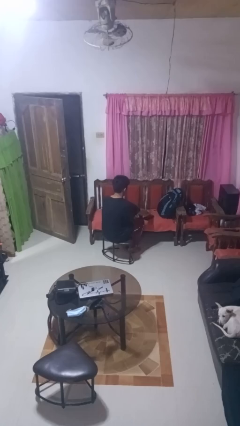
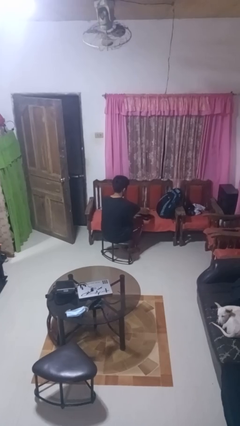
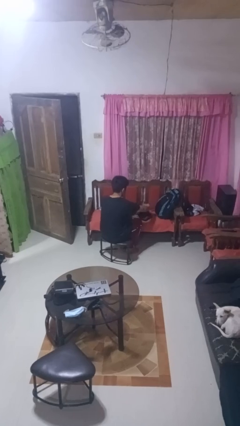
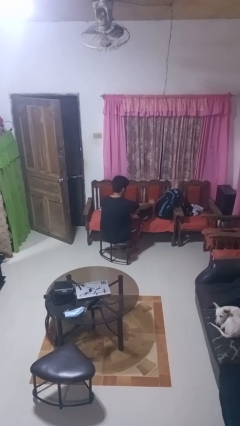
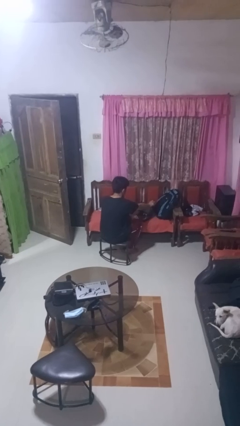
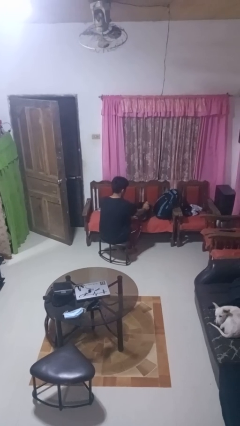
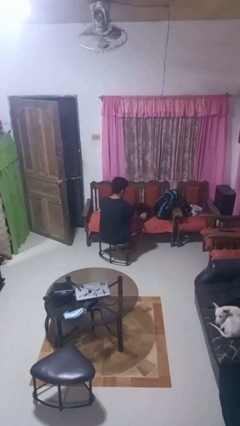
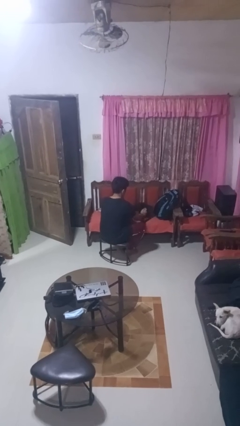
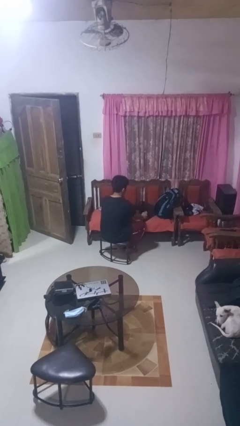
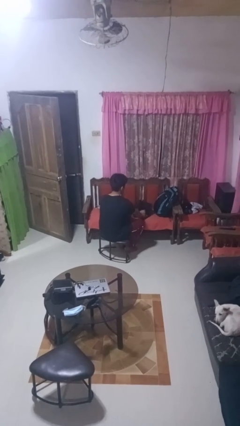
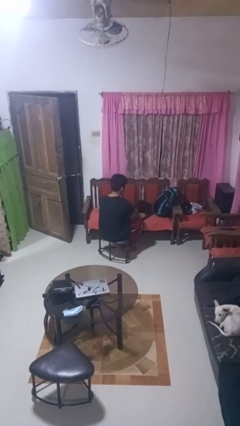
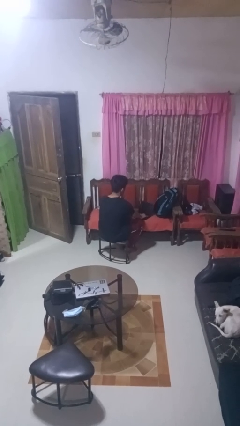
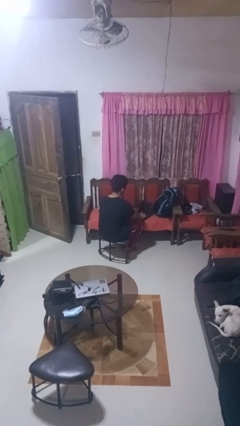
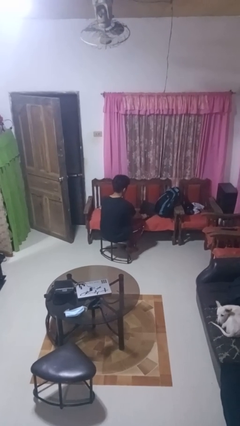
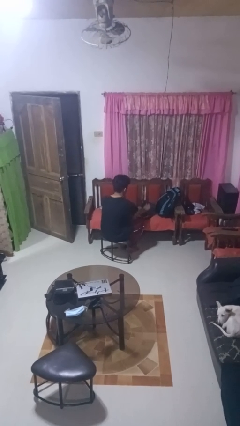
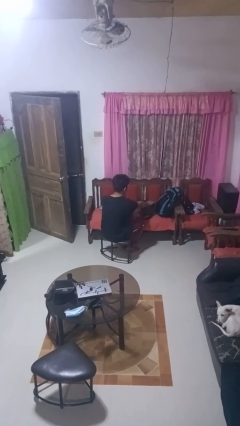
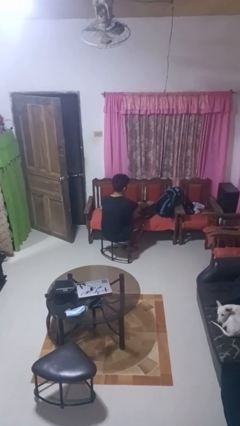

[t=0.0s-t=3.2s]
person opens laptop

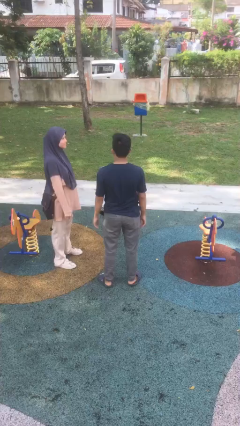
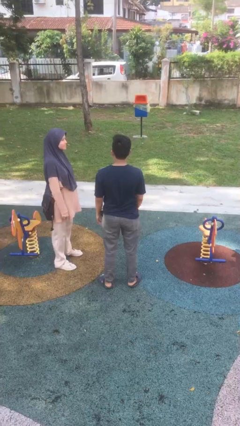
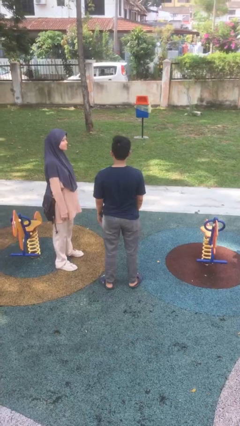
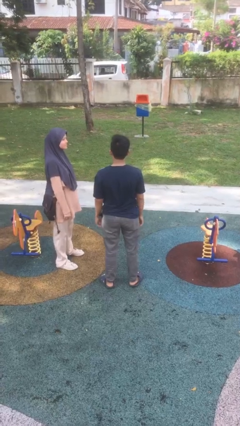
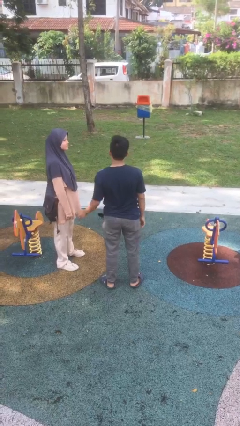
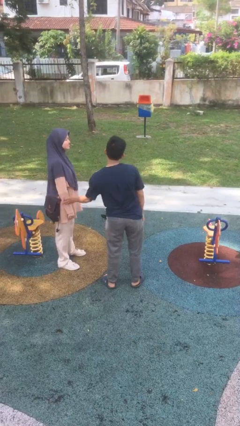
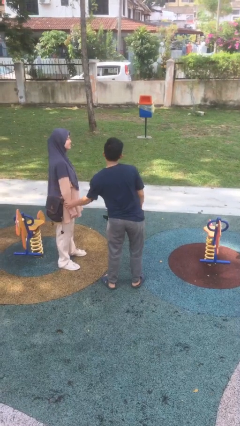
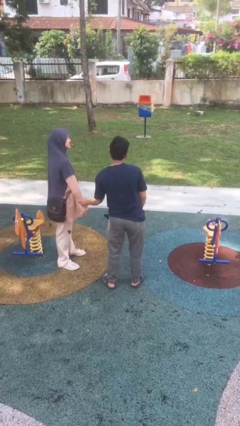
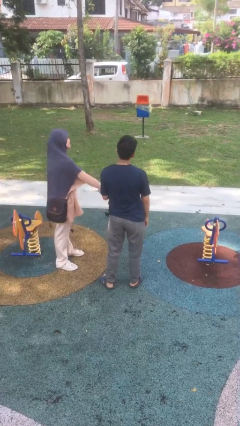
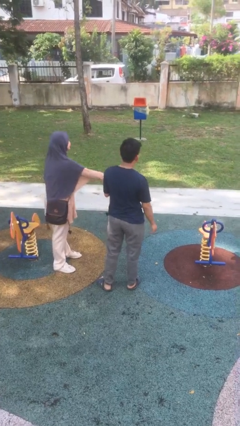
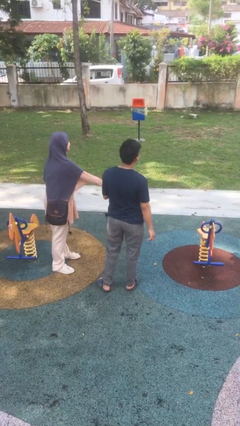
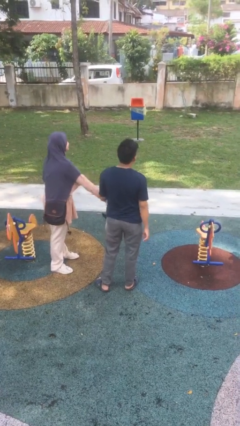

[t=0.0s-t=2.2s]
person grabs person by forearm

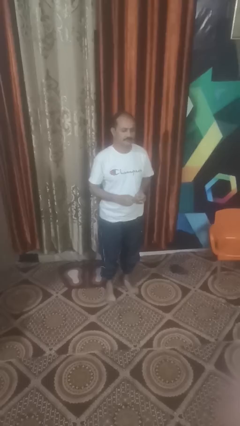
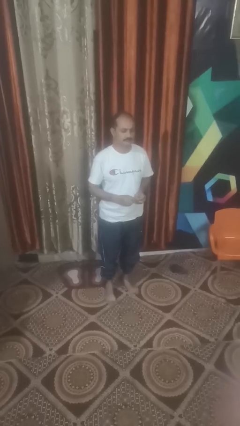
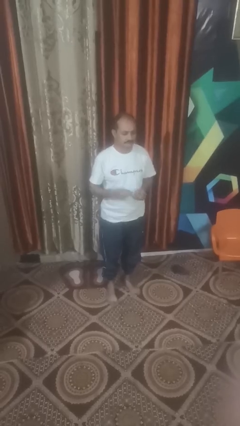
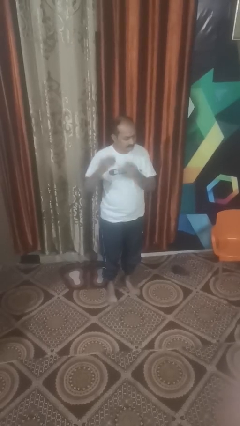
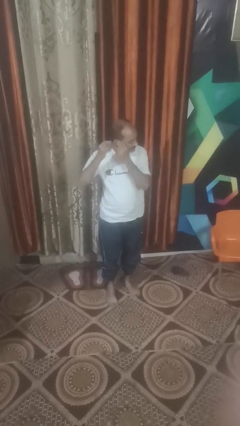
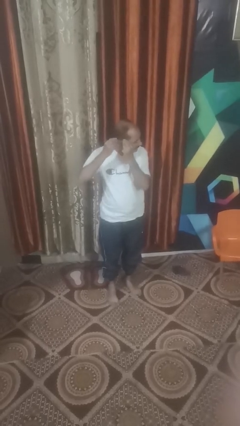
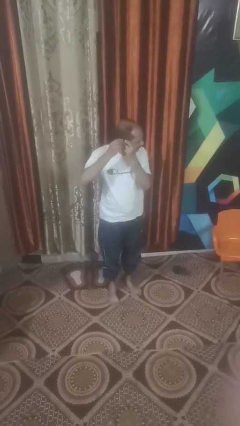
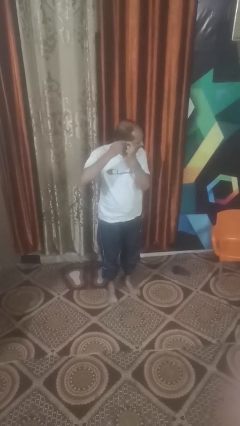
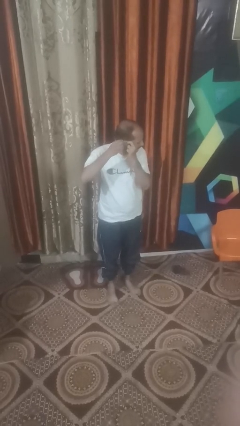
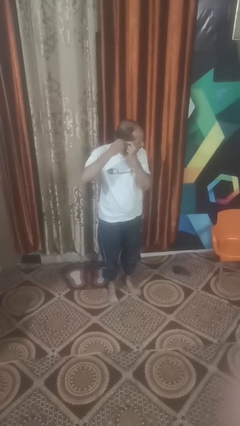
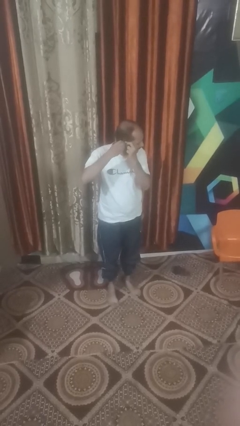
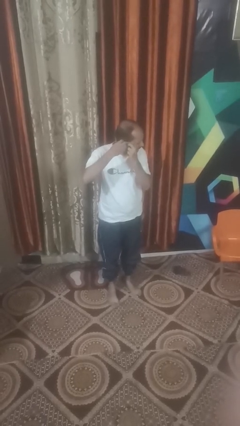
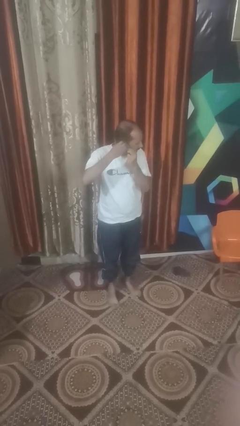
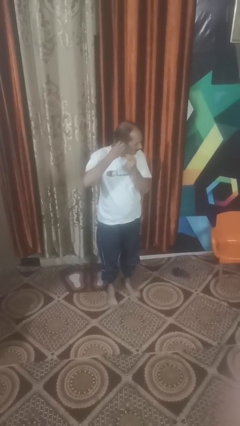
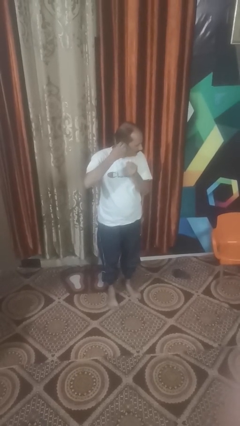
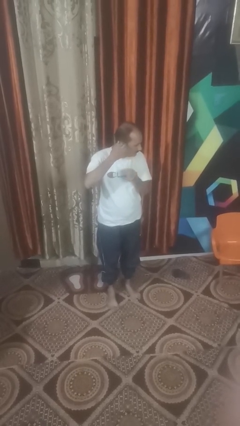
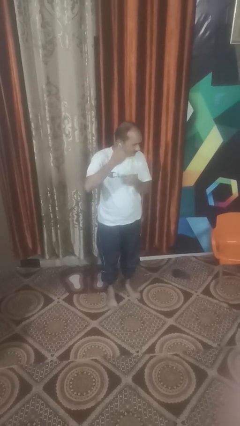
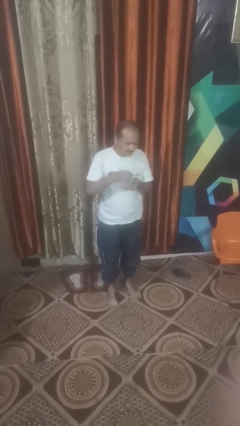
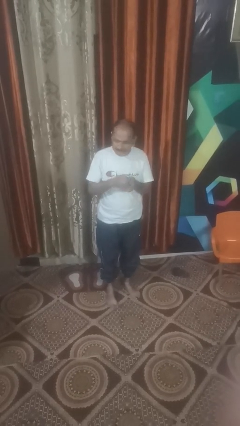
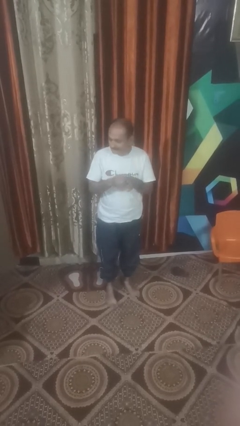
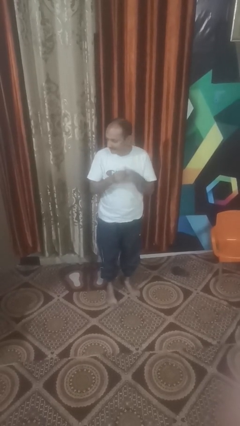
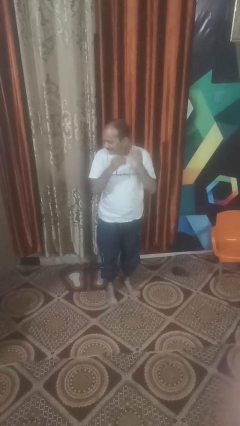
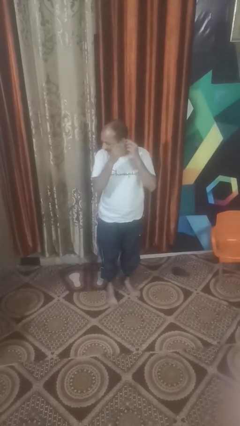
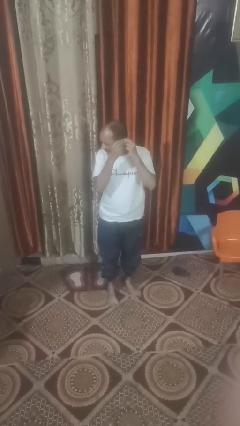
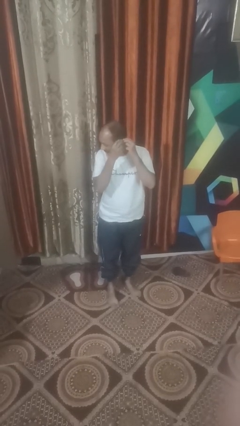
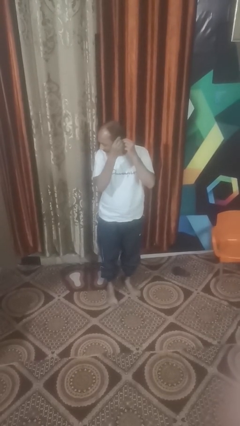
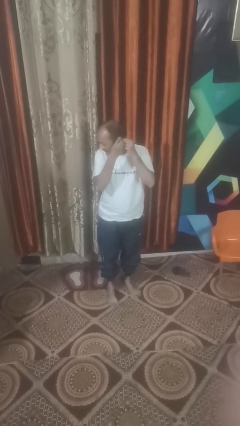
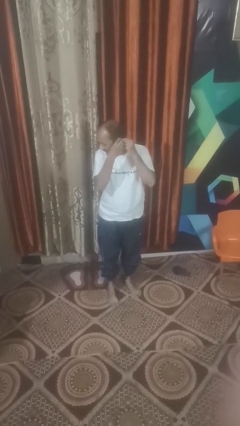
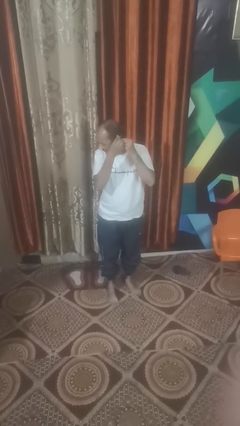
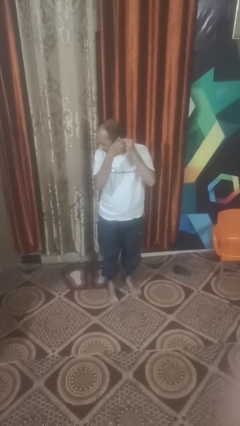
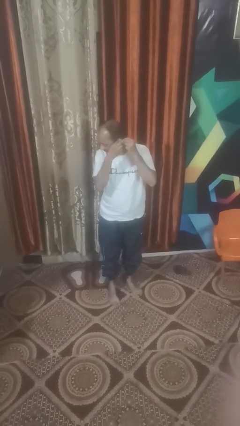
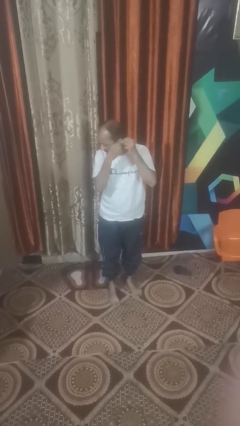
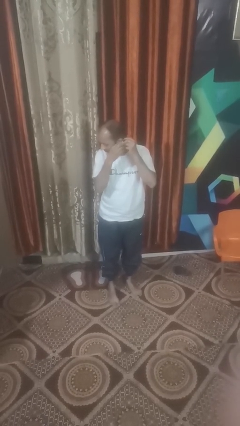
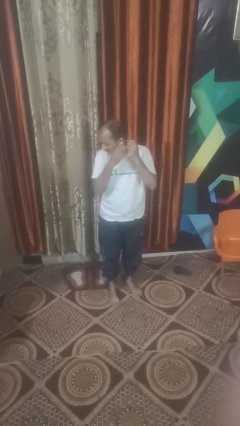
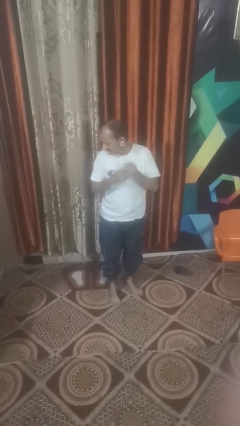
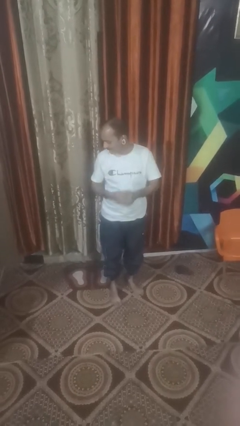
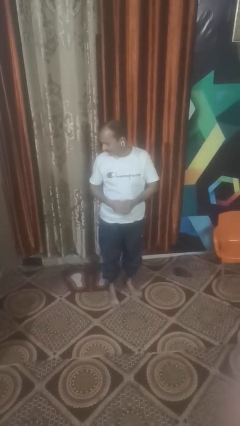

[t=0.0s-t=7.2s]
person puts on earrings

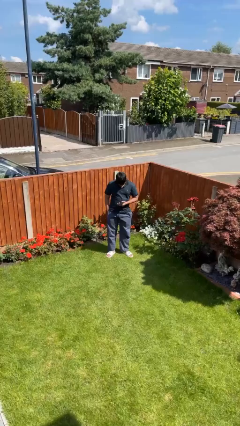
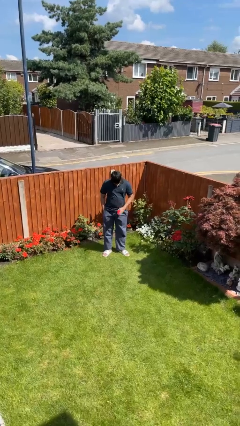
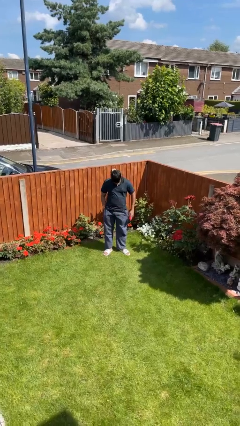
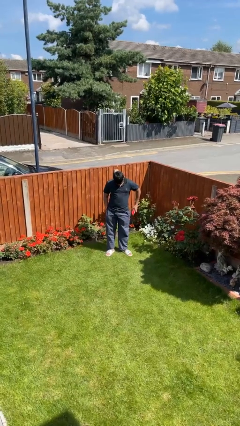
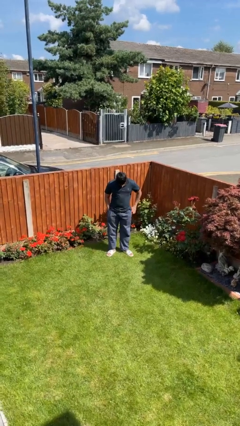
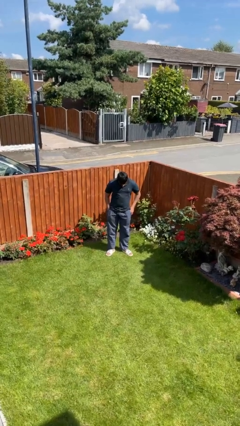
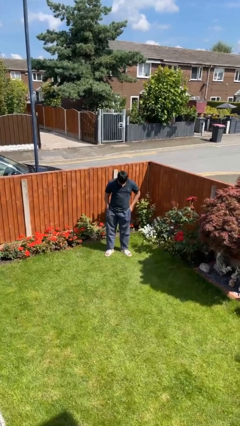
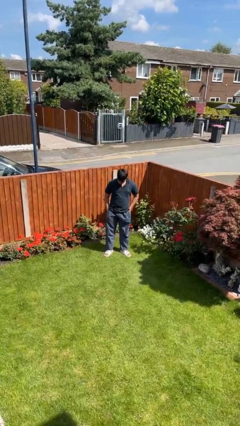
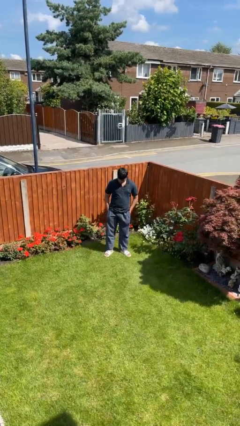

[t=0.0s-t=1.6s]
person puts phone into pocket

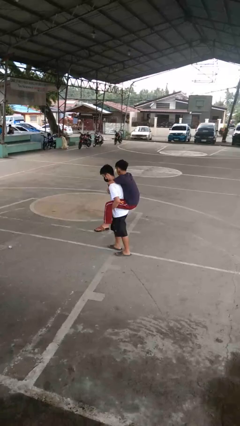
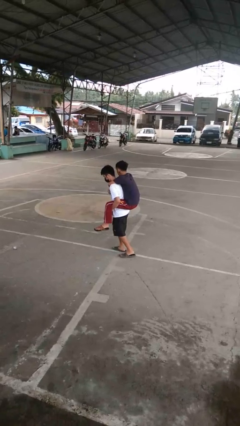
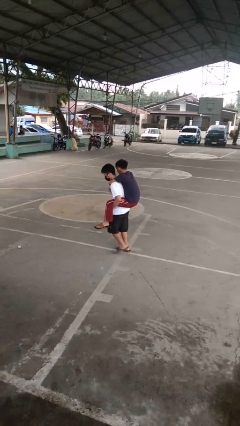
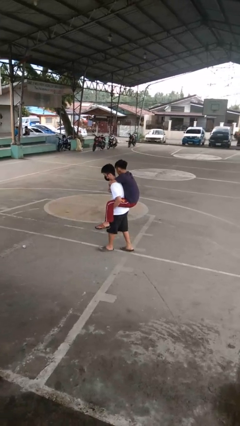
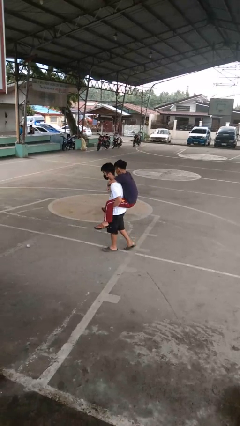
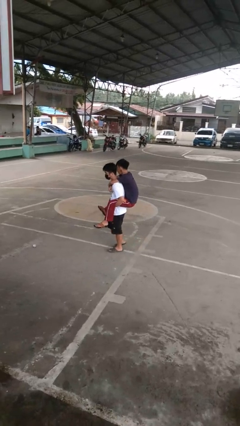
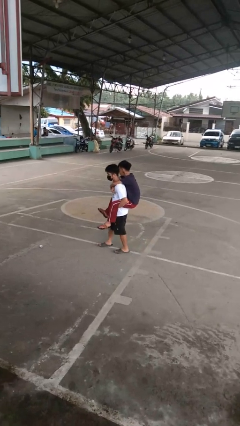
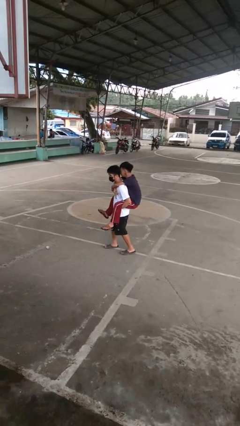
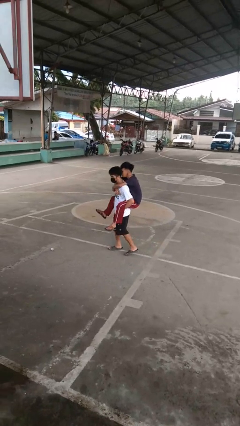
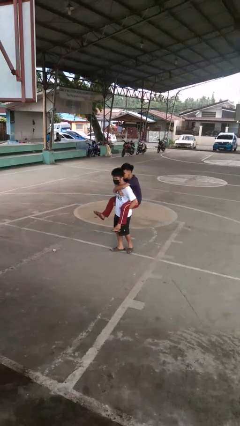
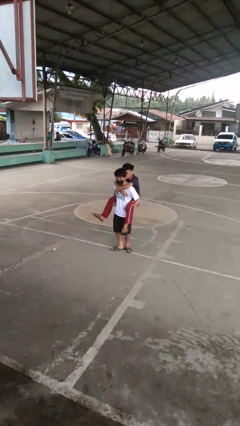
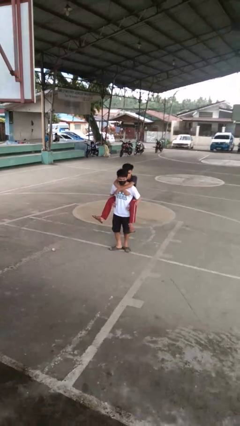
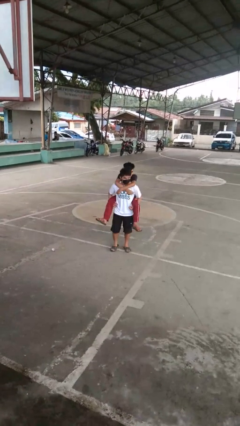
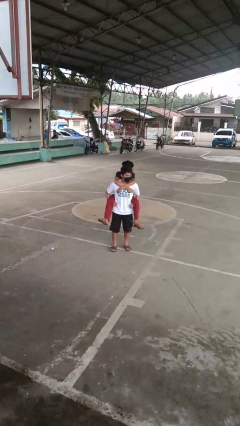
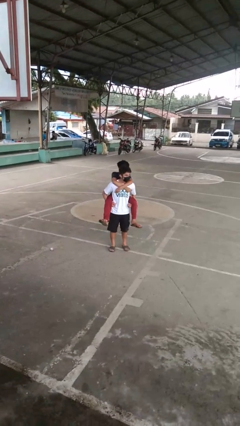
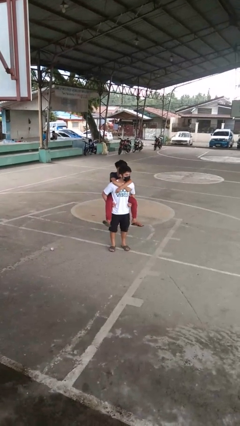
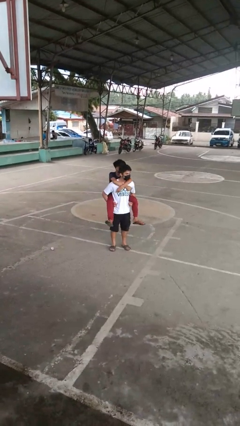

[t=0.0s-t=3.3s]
person carries person on back

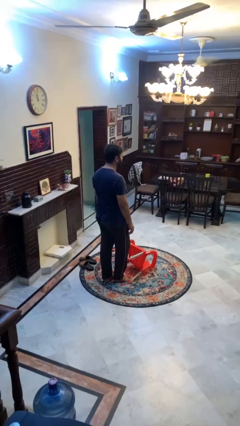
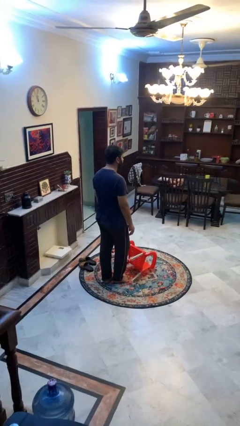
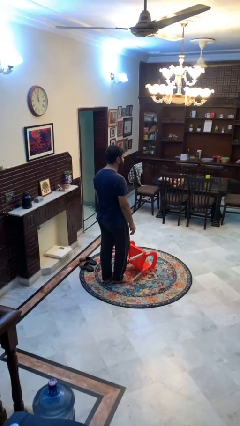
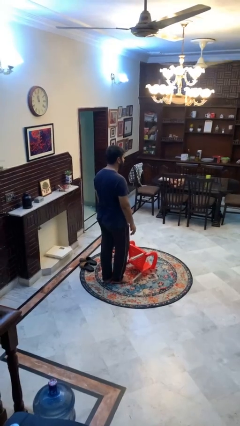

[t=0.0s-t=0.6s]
person knocks over furniture
